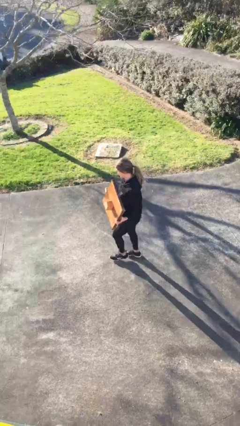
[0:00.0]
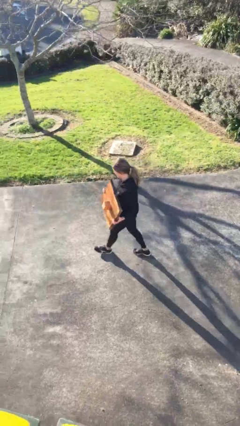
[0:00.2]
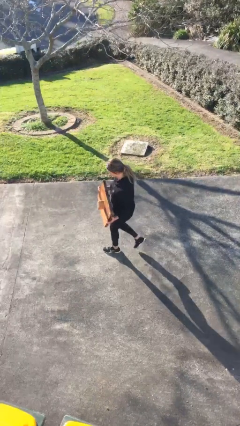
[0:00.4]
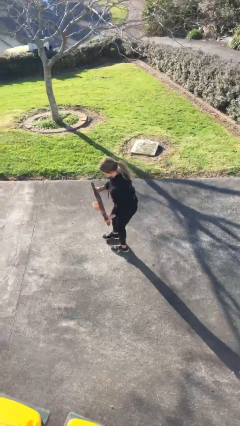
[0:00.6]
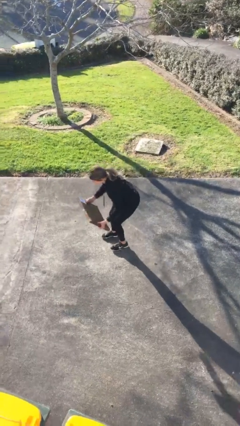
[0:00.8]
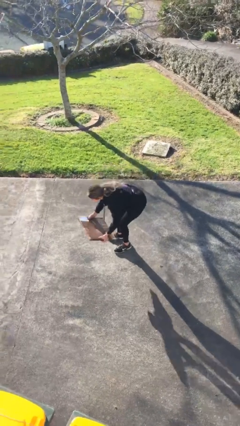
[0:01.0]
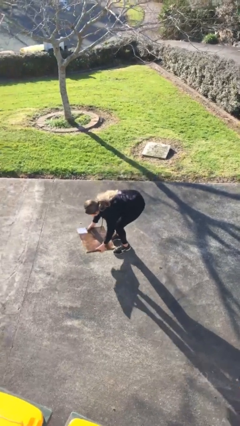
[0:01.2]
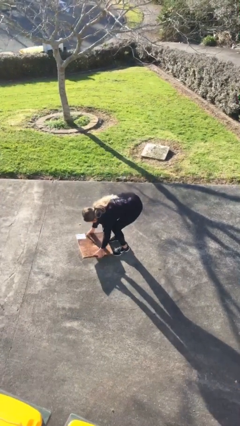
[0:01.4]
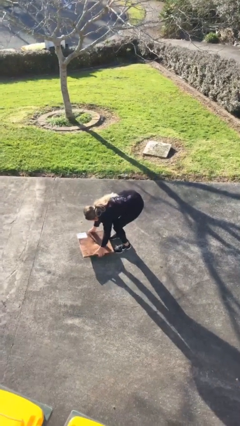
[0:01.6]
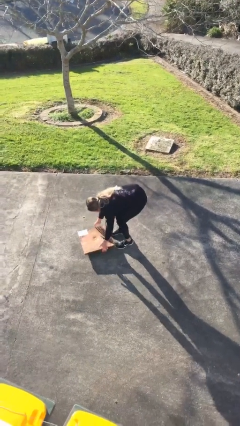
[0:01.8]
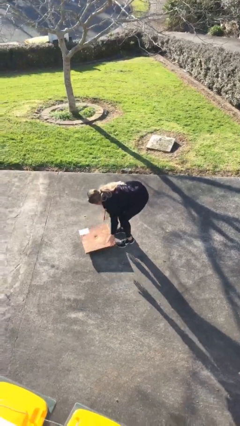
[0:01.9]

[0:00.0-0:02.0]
person puts down object on floor

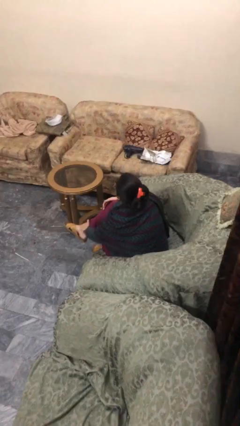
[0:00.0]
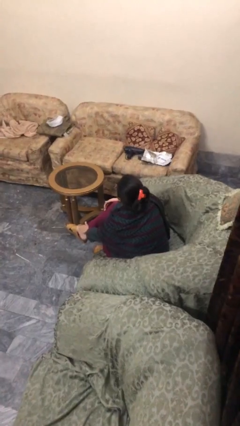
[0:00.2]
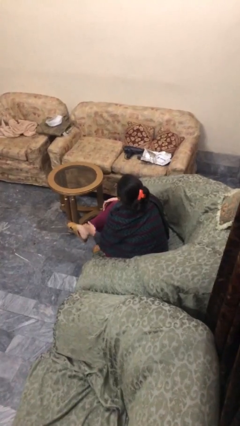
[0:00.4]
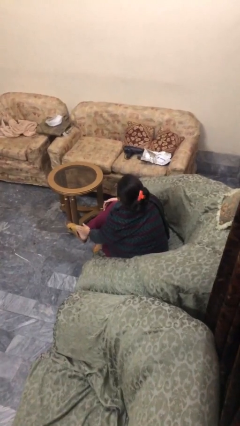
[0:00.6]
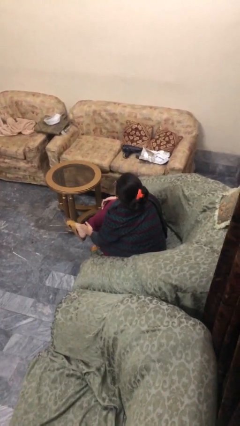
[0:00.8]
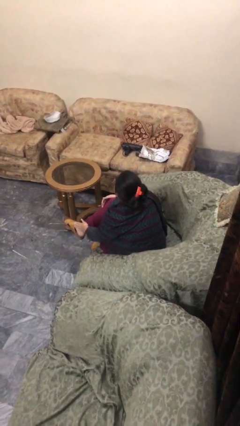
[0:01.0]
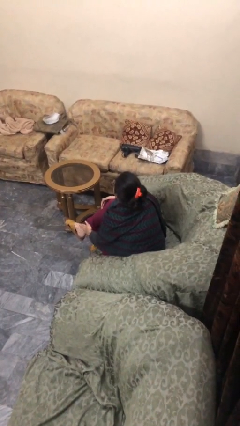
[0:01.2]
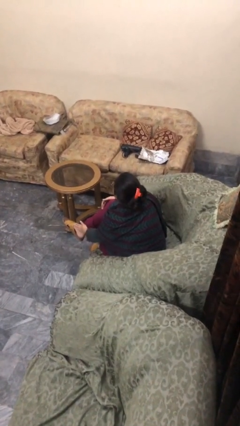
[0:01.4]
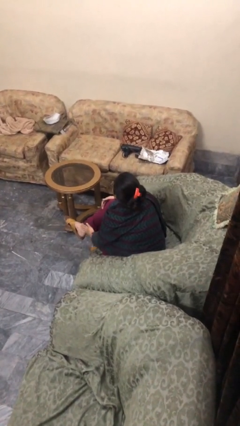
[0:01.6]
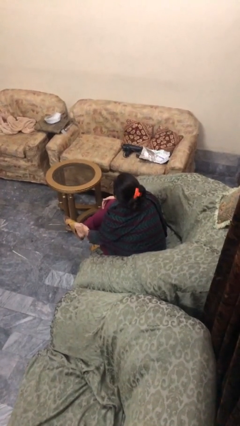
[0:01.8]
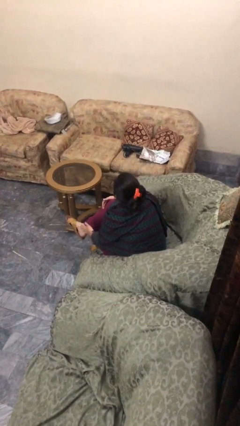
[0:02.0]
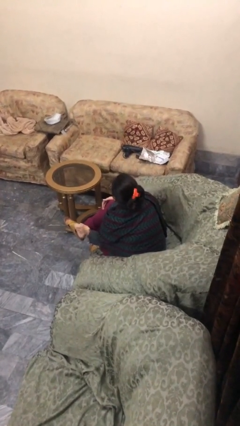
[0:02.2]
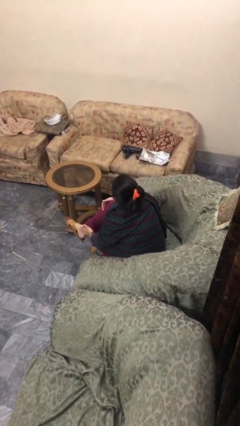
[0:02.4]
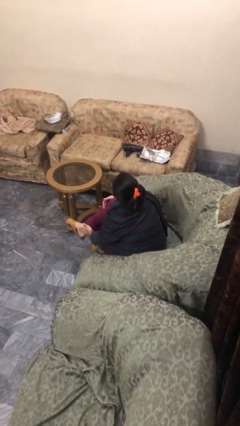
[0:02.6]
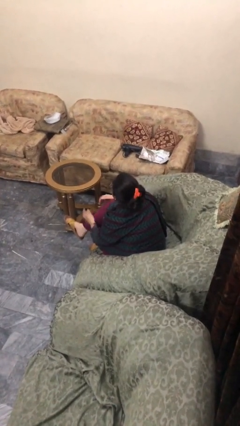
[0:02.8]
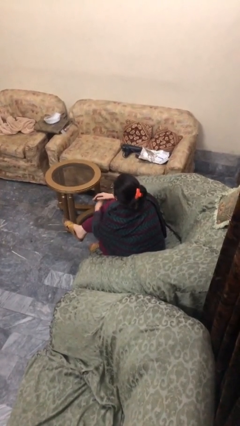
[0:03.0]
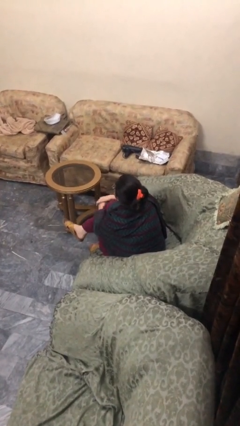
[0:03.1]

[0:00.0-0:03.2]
person rubs foot

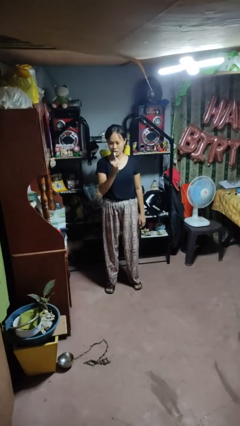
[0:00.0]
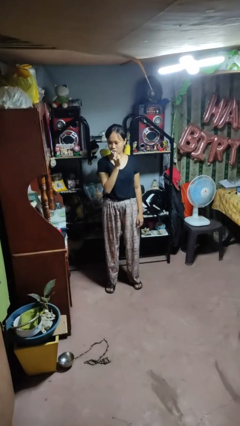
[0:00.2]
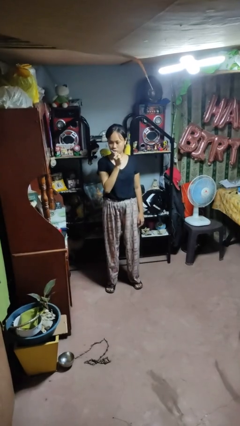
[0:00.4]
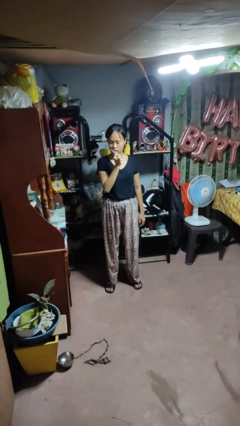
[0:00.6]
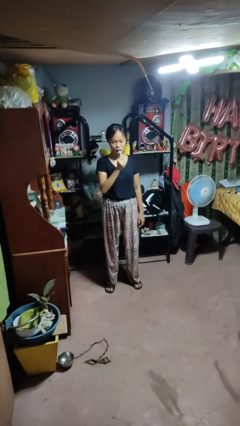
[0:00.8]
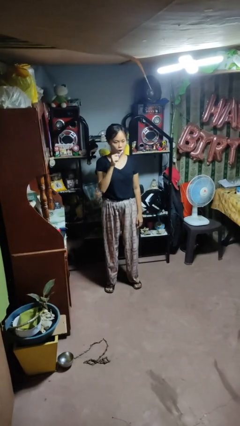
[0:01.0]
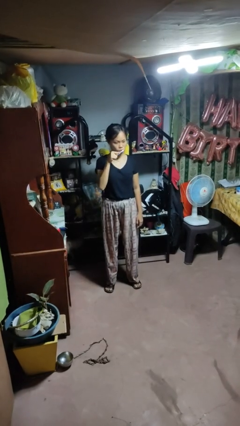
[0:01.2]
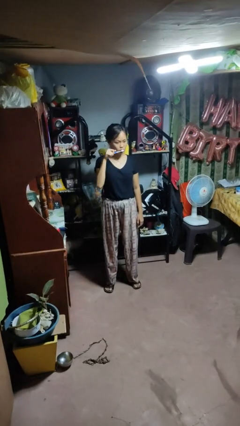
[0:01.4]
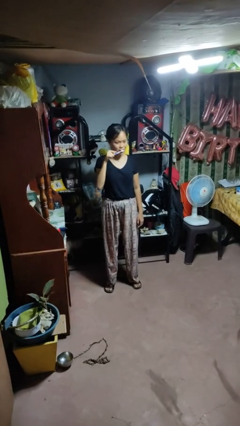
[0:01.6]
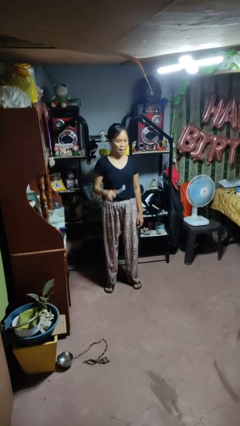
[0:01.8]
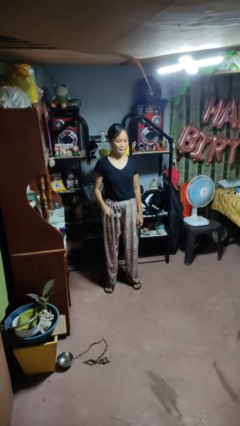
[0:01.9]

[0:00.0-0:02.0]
person brushes teeth

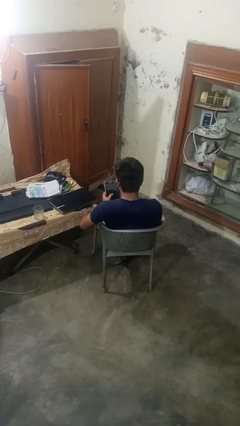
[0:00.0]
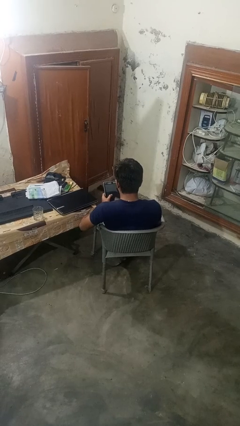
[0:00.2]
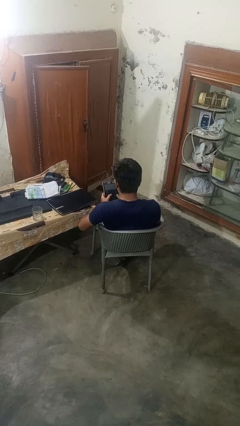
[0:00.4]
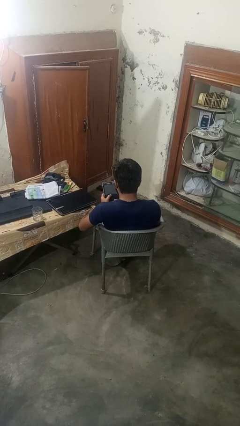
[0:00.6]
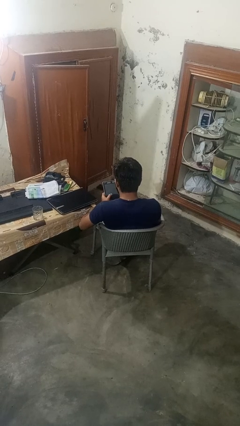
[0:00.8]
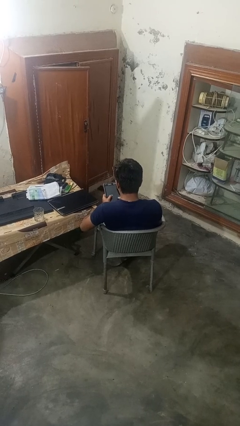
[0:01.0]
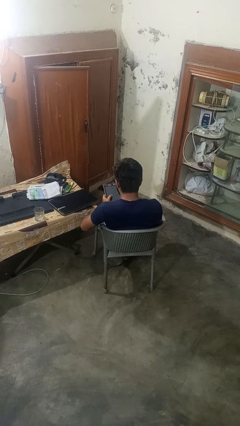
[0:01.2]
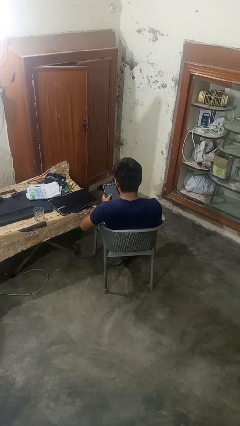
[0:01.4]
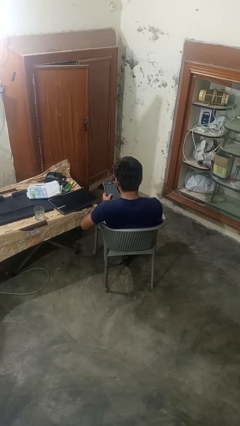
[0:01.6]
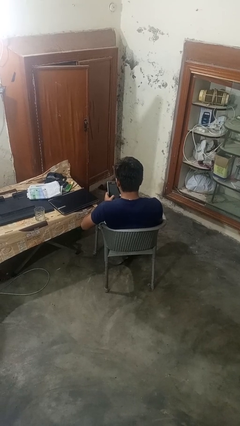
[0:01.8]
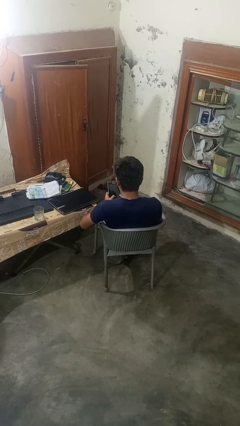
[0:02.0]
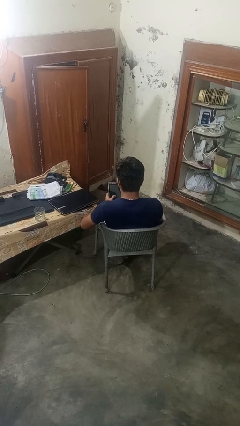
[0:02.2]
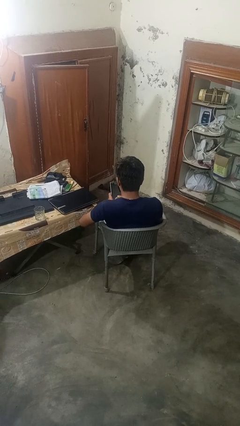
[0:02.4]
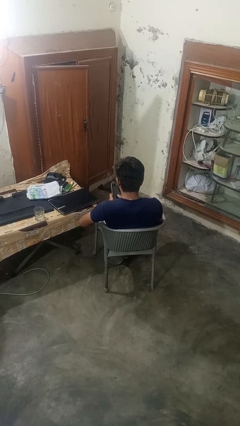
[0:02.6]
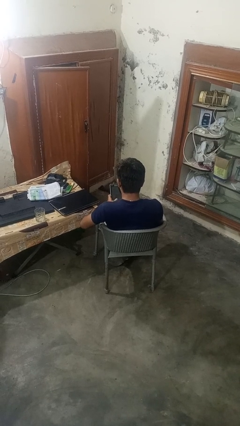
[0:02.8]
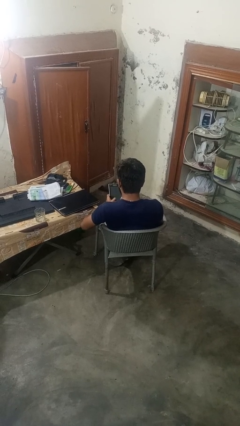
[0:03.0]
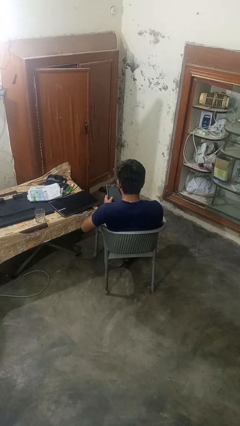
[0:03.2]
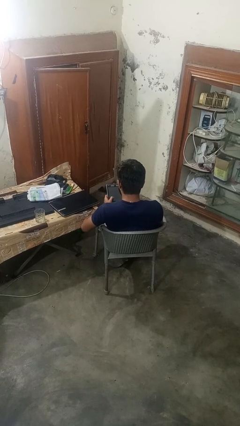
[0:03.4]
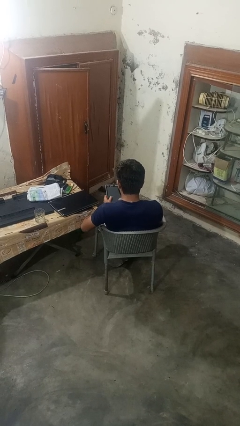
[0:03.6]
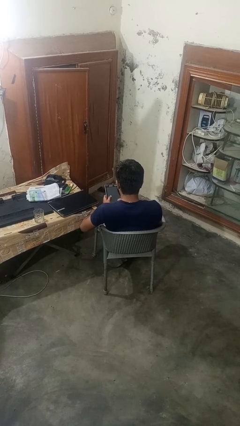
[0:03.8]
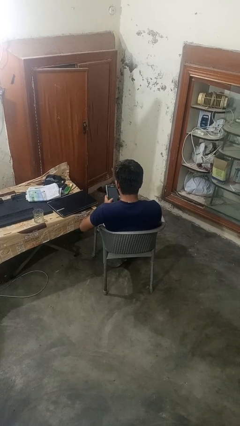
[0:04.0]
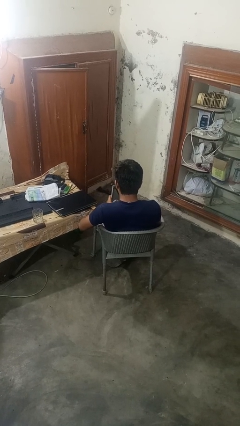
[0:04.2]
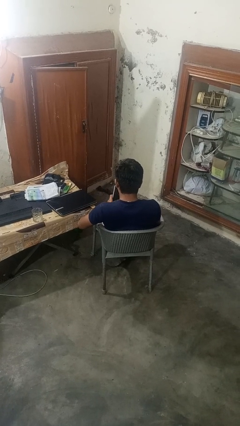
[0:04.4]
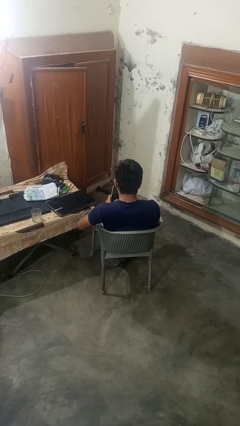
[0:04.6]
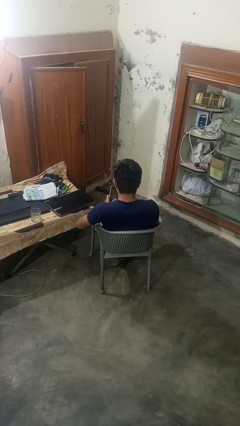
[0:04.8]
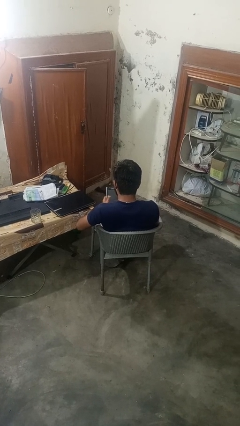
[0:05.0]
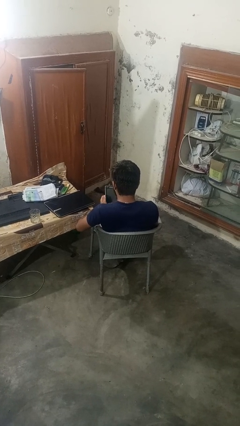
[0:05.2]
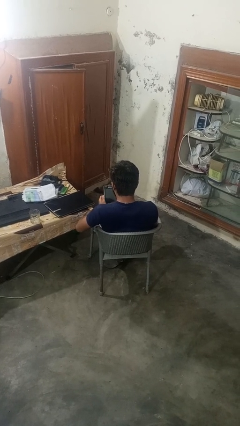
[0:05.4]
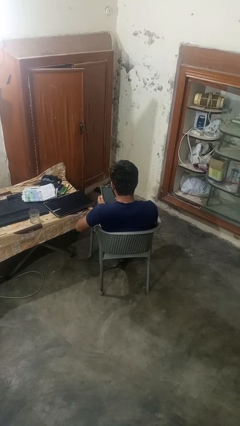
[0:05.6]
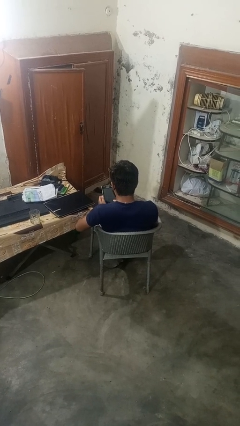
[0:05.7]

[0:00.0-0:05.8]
person interacts with tablet

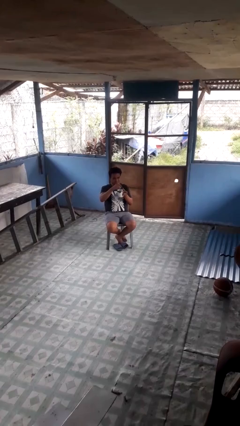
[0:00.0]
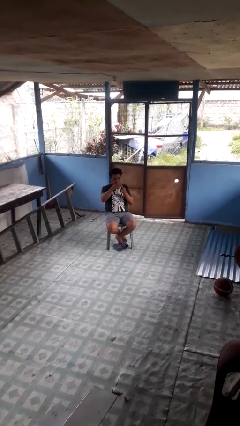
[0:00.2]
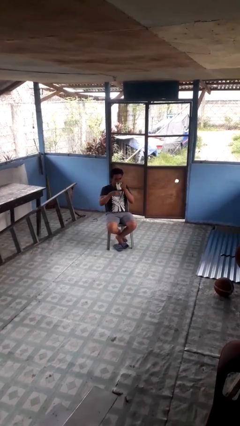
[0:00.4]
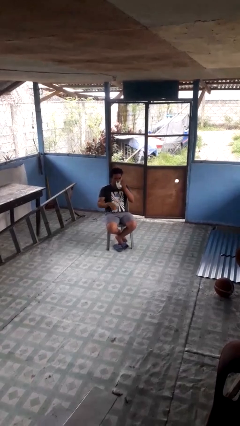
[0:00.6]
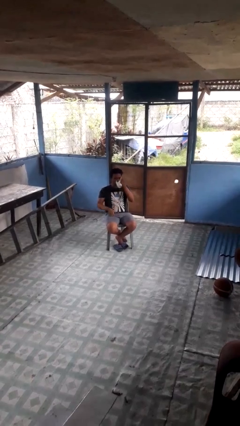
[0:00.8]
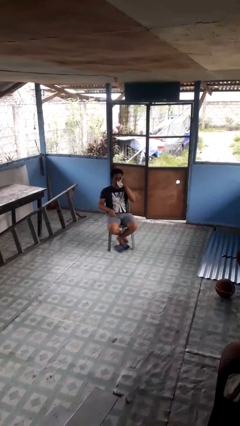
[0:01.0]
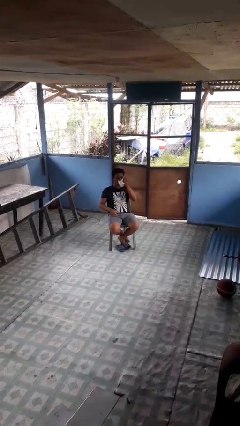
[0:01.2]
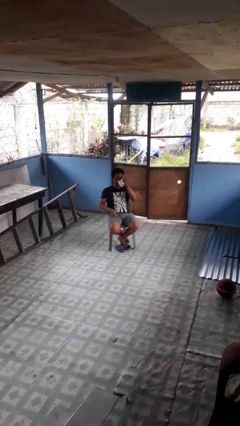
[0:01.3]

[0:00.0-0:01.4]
person drinks from mug

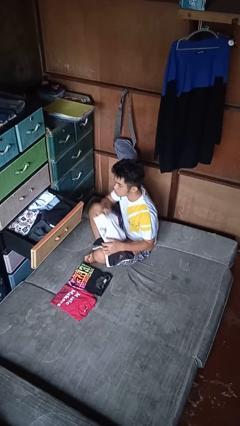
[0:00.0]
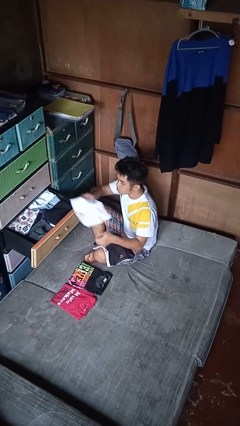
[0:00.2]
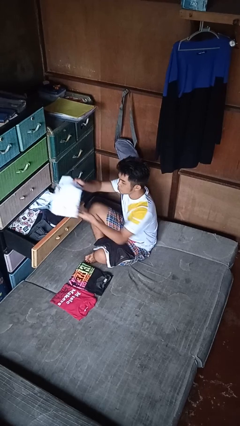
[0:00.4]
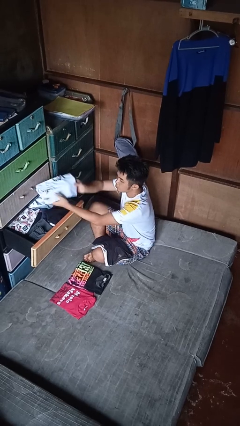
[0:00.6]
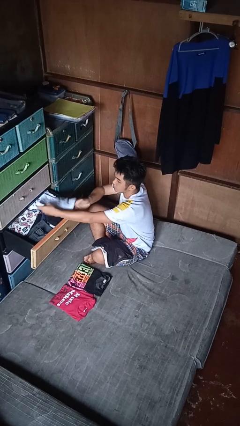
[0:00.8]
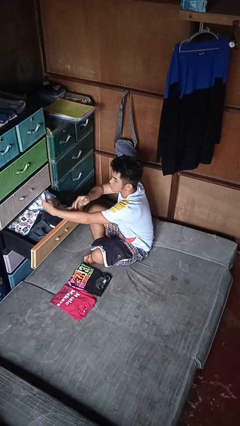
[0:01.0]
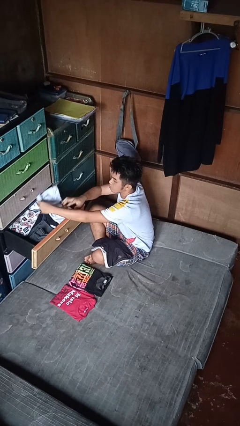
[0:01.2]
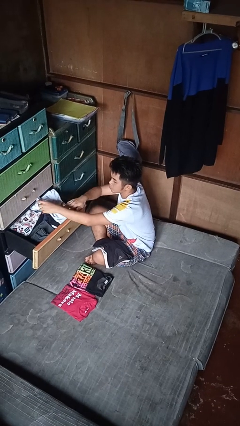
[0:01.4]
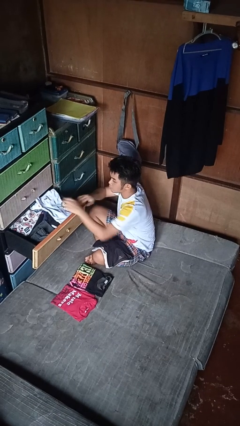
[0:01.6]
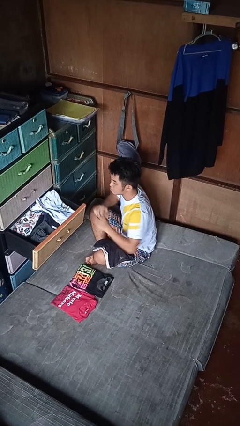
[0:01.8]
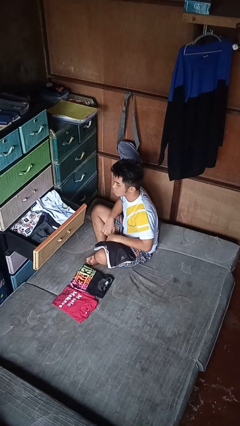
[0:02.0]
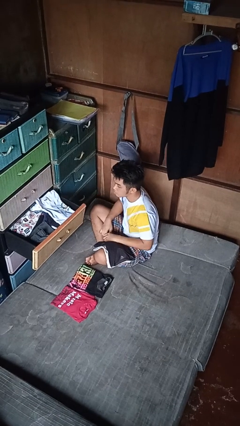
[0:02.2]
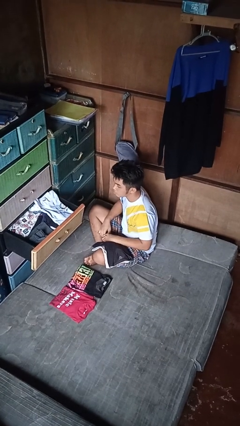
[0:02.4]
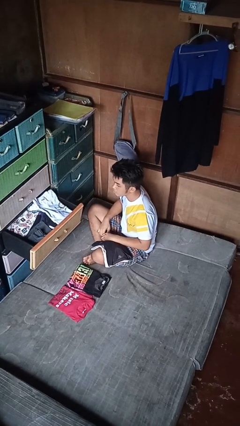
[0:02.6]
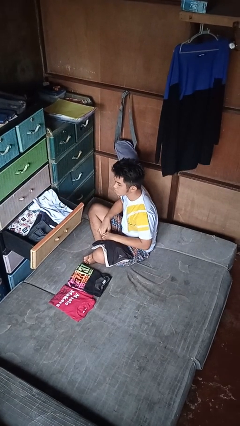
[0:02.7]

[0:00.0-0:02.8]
person puts clothes into dresser

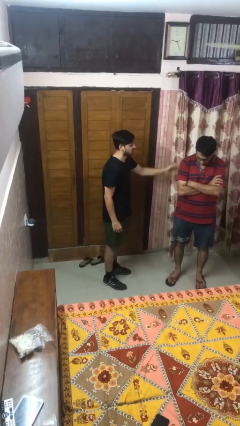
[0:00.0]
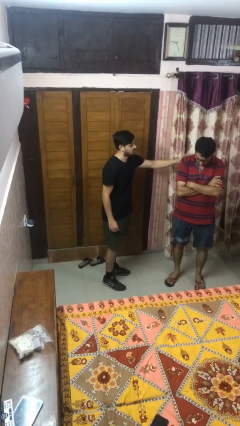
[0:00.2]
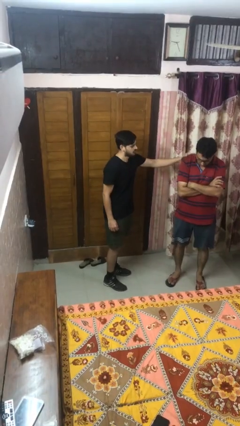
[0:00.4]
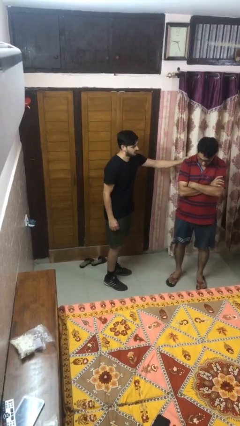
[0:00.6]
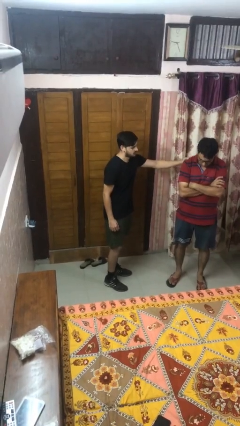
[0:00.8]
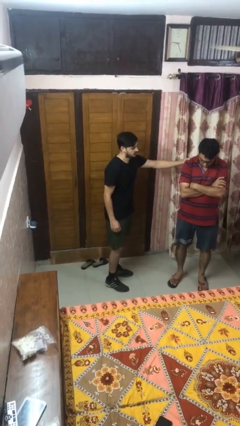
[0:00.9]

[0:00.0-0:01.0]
person pounds shoulders of person
